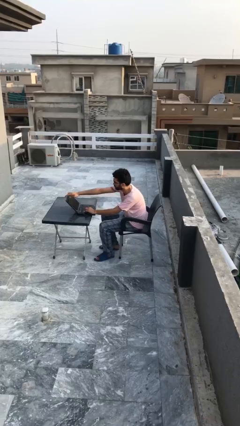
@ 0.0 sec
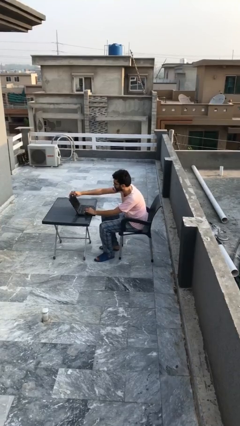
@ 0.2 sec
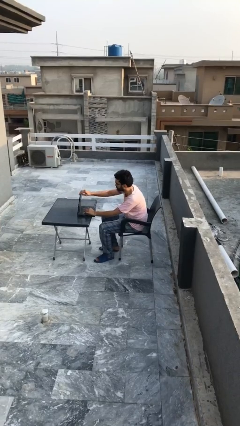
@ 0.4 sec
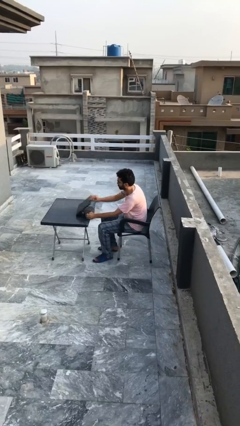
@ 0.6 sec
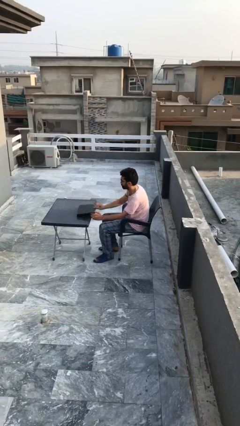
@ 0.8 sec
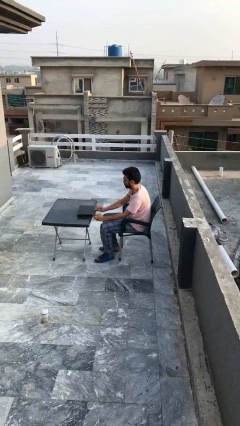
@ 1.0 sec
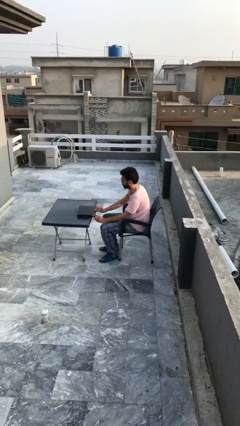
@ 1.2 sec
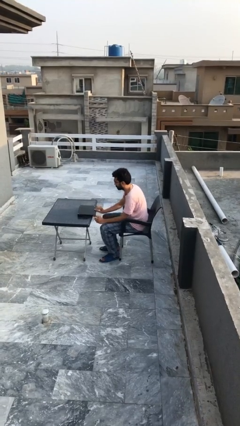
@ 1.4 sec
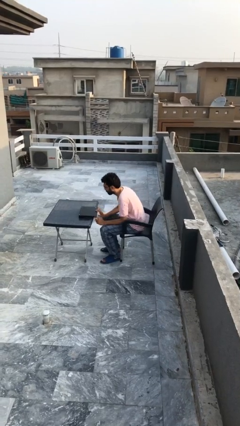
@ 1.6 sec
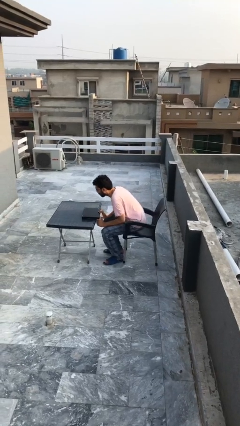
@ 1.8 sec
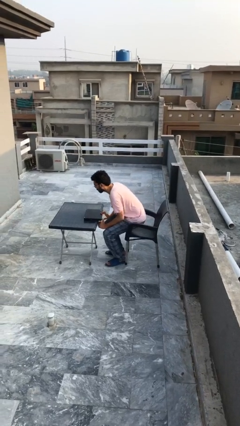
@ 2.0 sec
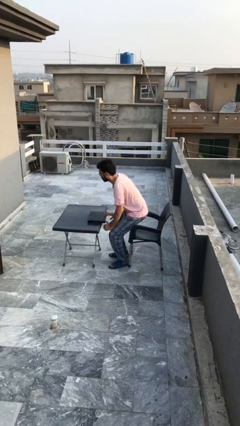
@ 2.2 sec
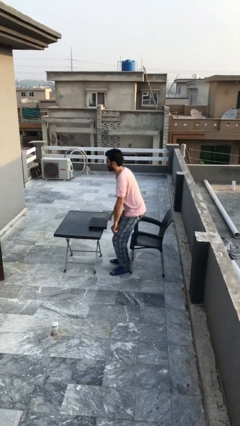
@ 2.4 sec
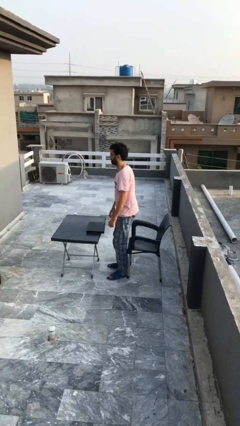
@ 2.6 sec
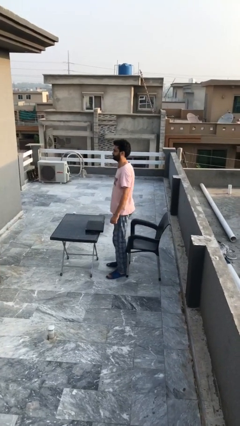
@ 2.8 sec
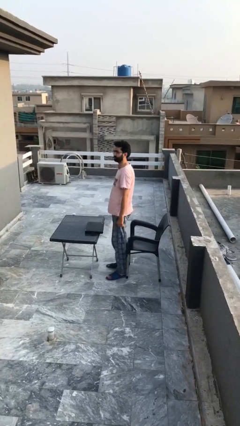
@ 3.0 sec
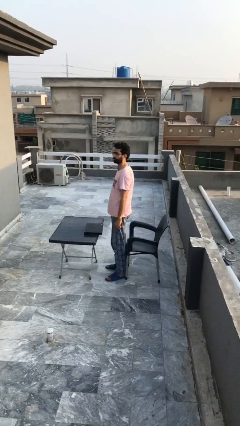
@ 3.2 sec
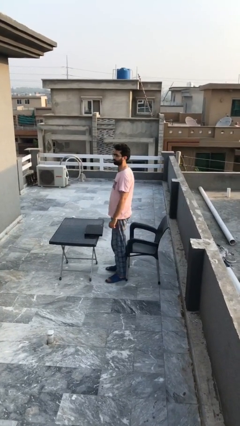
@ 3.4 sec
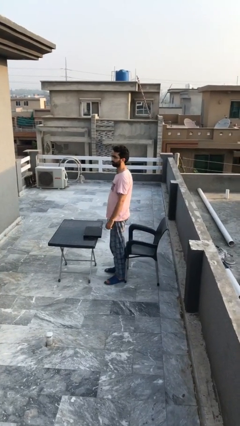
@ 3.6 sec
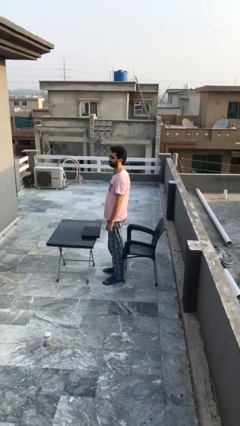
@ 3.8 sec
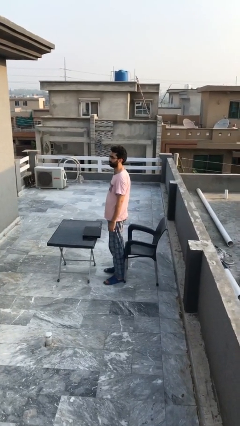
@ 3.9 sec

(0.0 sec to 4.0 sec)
person stands up

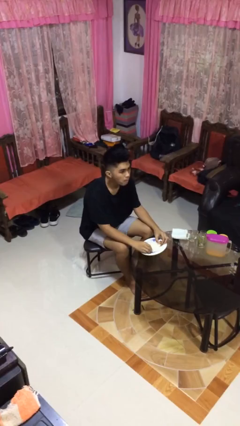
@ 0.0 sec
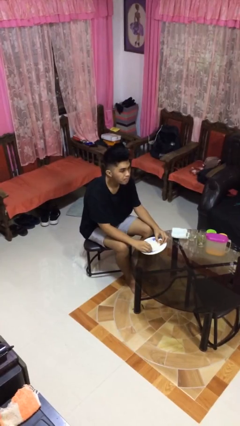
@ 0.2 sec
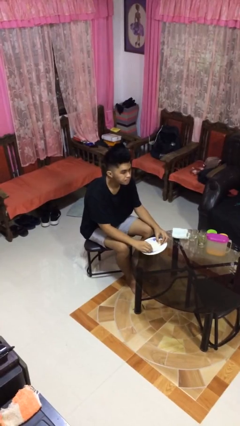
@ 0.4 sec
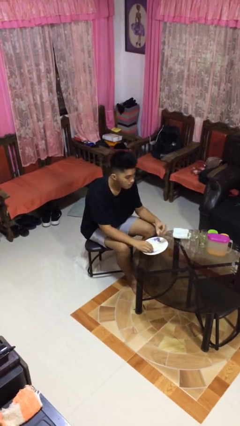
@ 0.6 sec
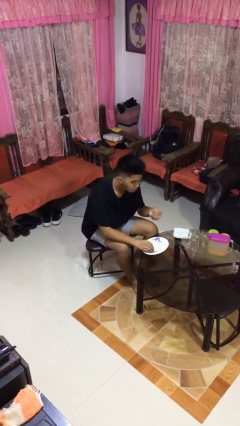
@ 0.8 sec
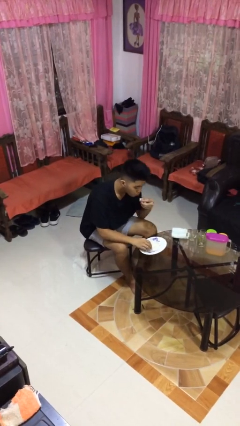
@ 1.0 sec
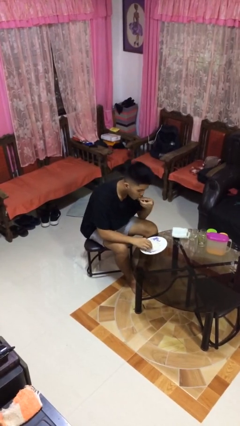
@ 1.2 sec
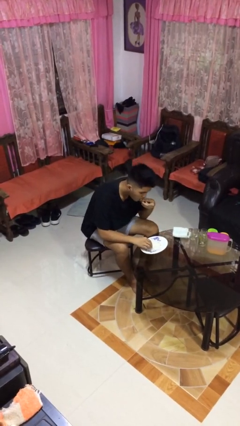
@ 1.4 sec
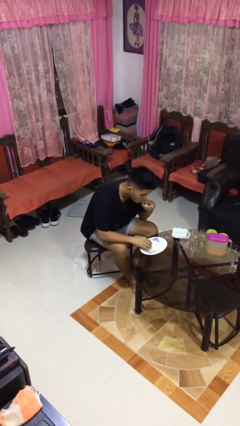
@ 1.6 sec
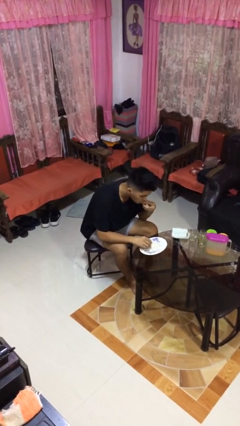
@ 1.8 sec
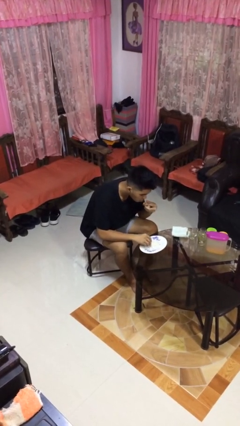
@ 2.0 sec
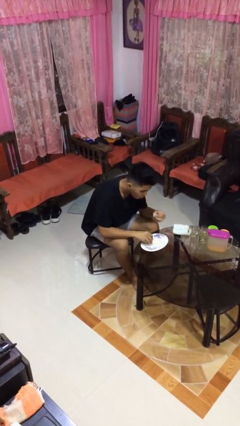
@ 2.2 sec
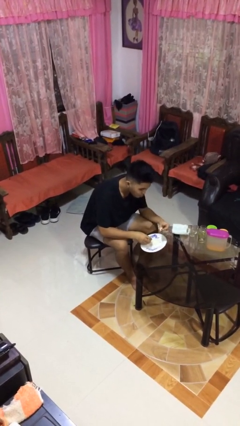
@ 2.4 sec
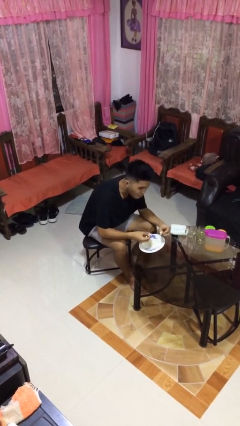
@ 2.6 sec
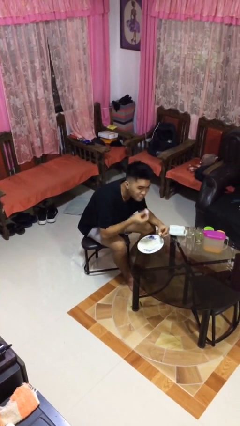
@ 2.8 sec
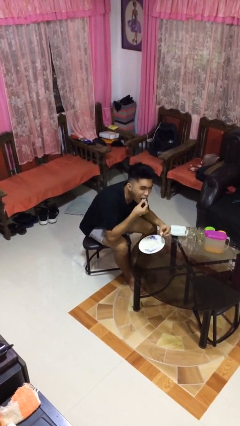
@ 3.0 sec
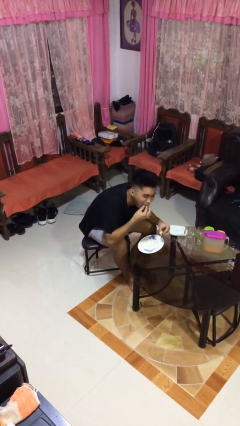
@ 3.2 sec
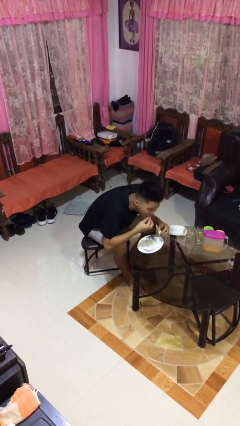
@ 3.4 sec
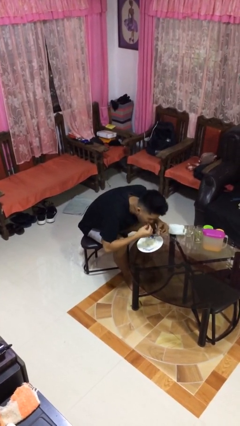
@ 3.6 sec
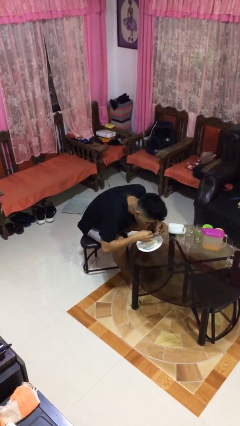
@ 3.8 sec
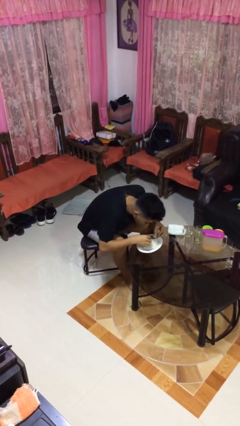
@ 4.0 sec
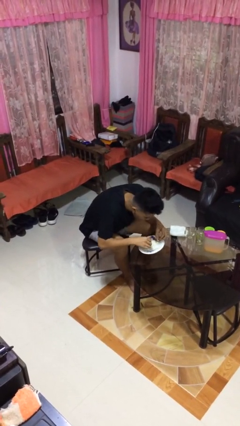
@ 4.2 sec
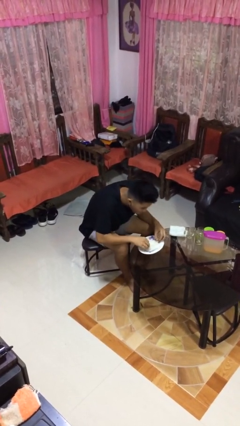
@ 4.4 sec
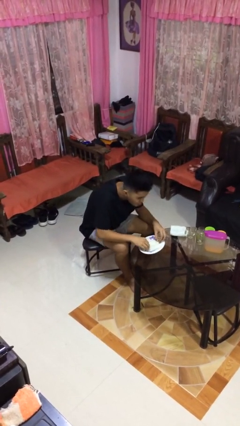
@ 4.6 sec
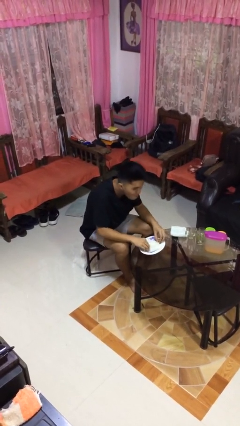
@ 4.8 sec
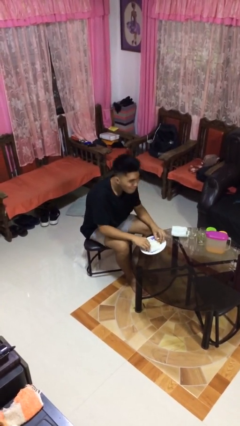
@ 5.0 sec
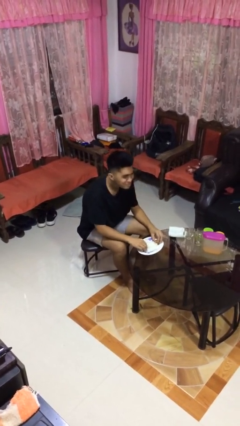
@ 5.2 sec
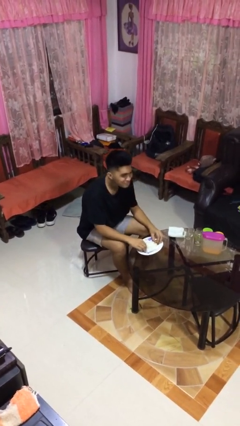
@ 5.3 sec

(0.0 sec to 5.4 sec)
person eats with hands

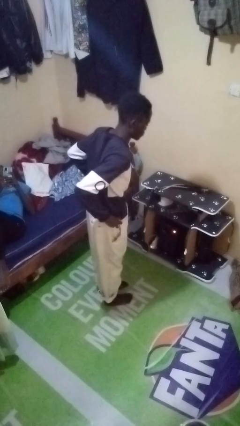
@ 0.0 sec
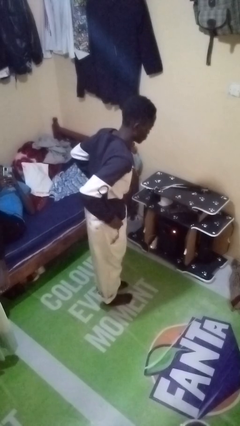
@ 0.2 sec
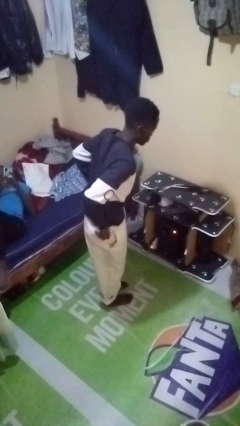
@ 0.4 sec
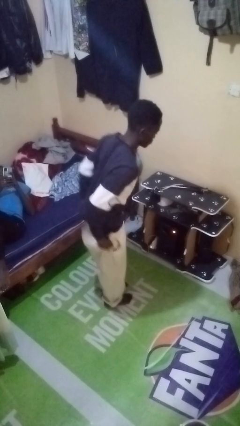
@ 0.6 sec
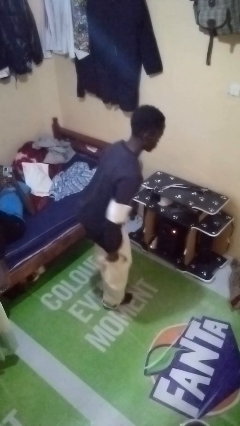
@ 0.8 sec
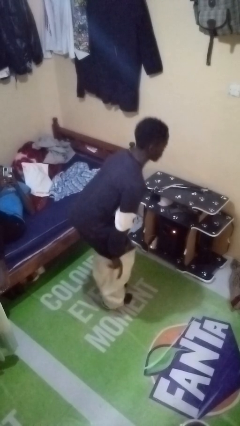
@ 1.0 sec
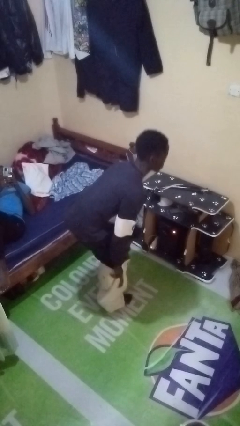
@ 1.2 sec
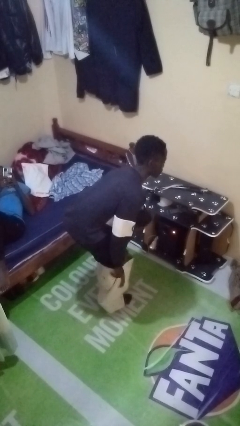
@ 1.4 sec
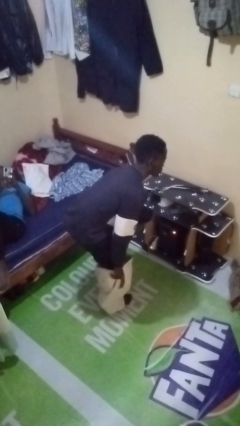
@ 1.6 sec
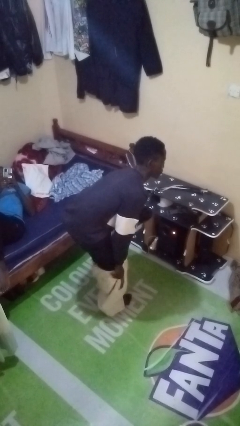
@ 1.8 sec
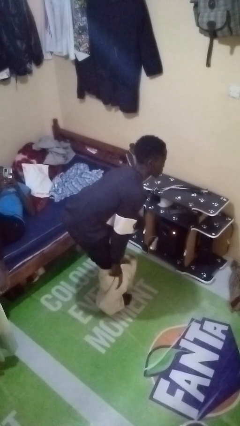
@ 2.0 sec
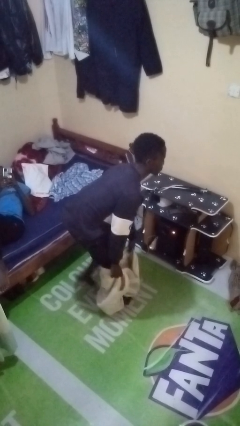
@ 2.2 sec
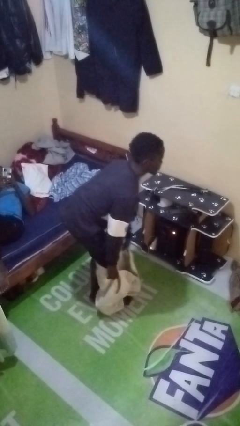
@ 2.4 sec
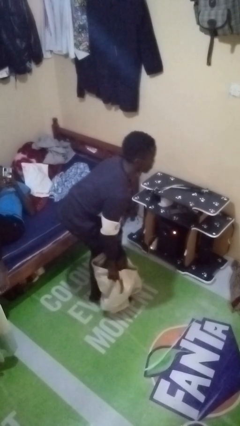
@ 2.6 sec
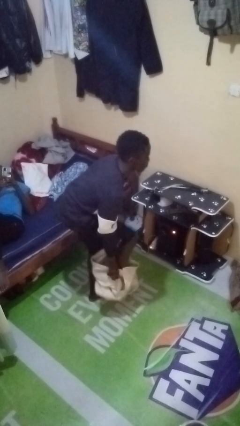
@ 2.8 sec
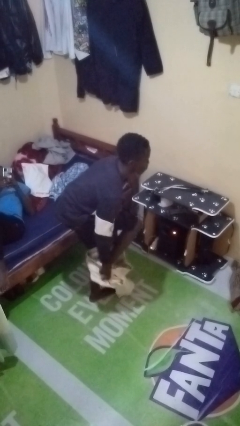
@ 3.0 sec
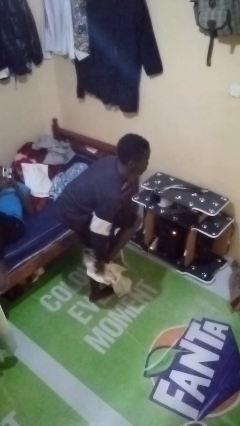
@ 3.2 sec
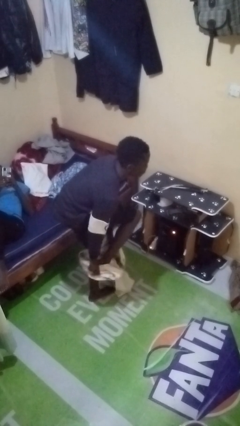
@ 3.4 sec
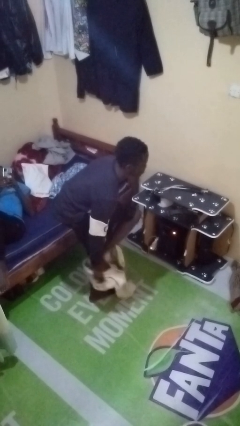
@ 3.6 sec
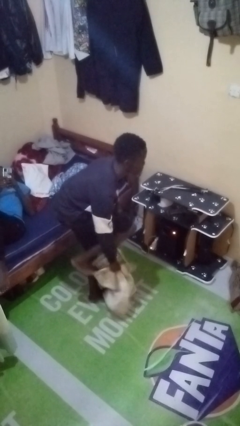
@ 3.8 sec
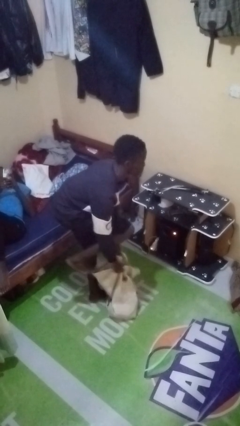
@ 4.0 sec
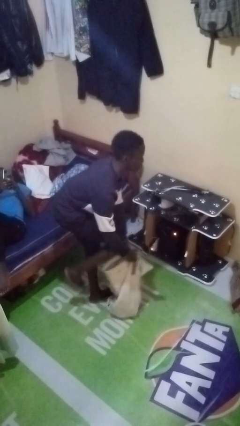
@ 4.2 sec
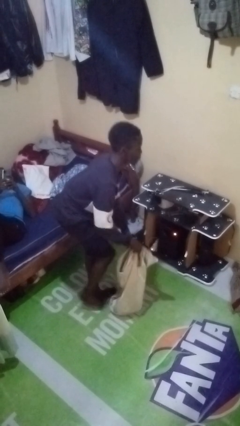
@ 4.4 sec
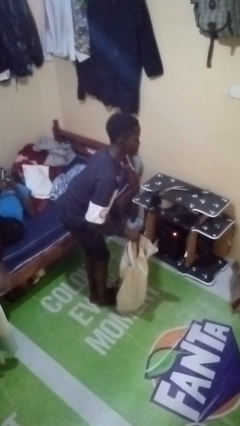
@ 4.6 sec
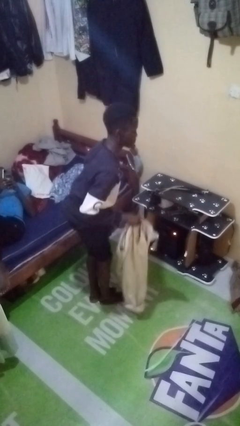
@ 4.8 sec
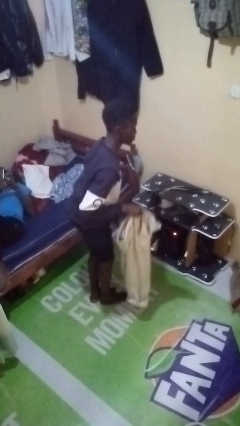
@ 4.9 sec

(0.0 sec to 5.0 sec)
person takes off pants

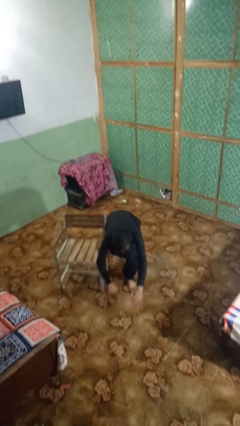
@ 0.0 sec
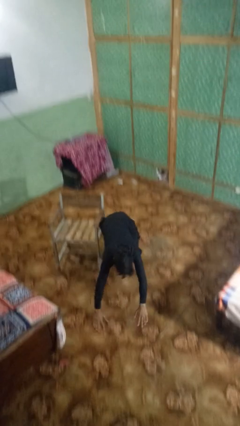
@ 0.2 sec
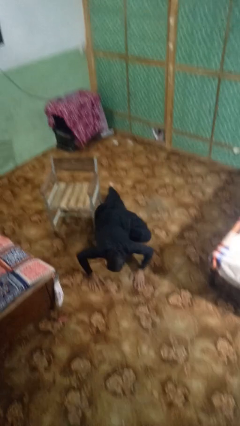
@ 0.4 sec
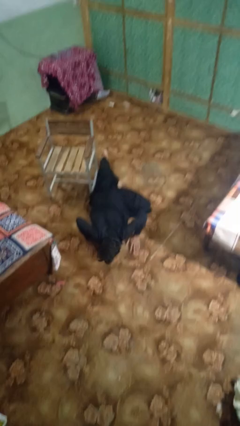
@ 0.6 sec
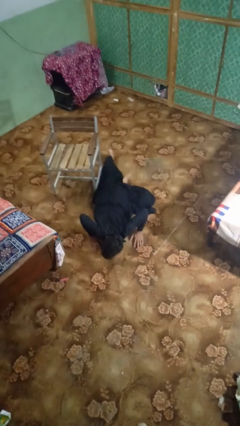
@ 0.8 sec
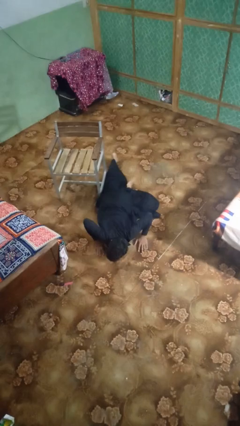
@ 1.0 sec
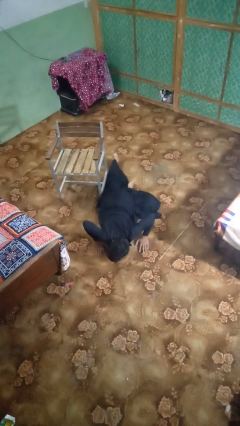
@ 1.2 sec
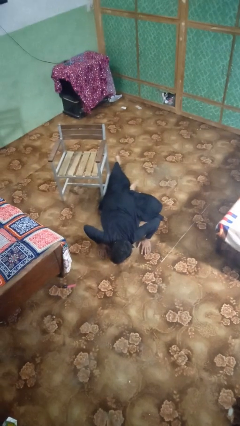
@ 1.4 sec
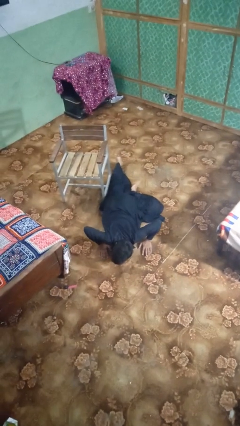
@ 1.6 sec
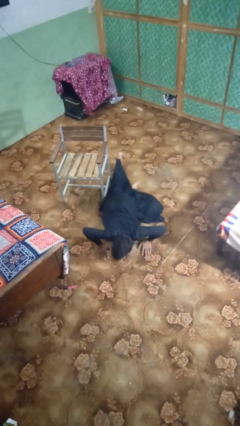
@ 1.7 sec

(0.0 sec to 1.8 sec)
person lies down on floor

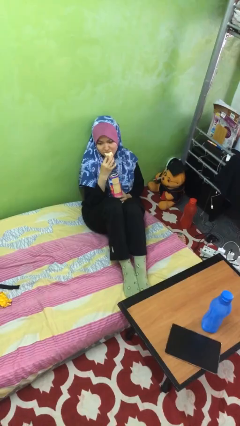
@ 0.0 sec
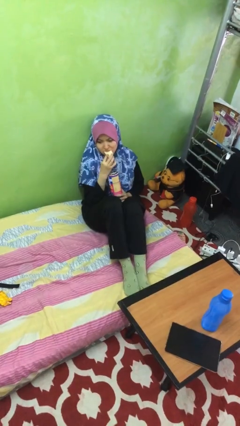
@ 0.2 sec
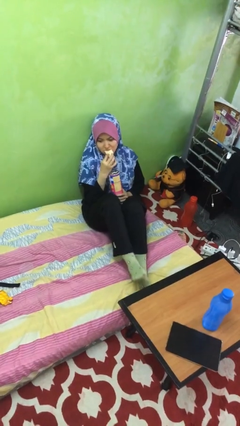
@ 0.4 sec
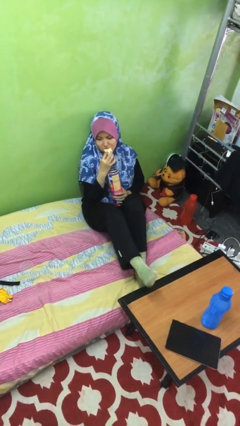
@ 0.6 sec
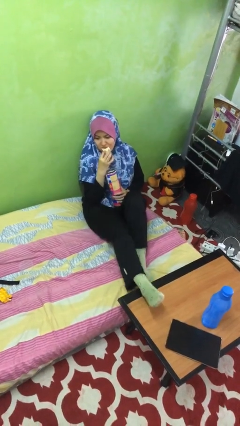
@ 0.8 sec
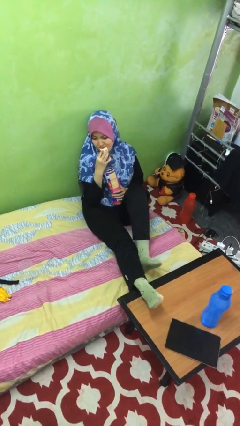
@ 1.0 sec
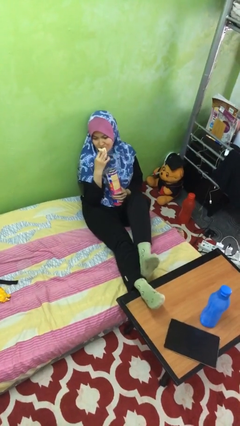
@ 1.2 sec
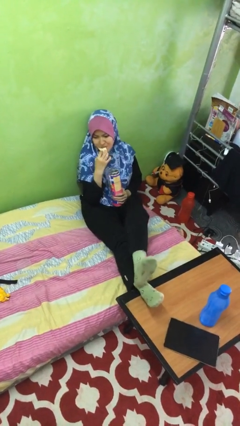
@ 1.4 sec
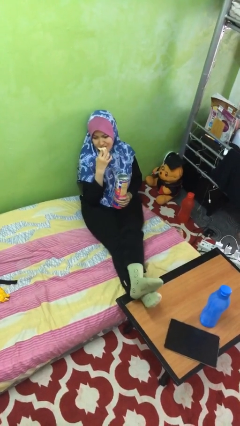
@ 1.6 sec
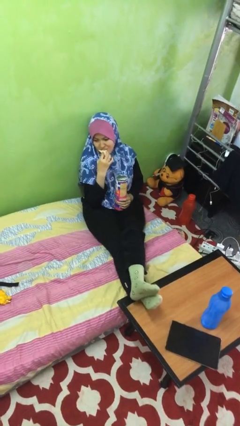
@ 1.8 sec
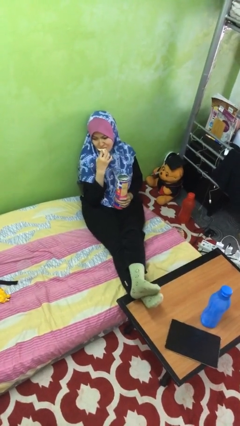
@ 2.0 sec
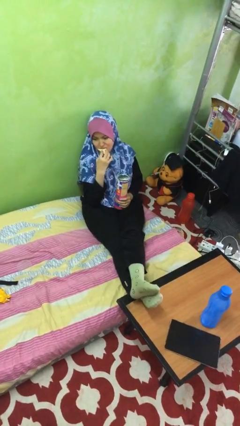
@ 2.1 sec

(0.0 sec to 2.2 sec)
person puts feet up
